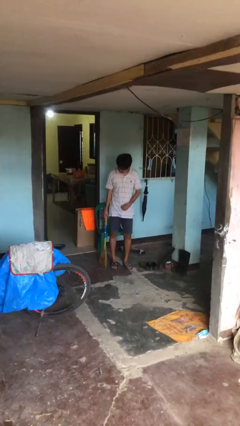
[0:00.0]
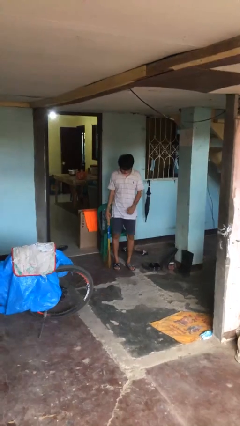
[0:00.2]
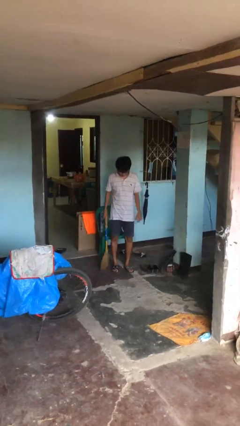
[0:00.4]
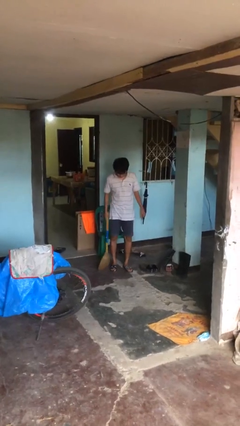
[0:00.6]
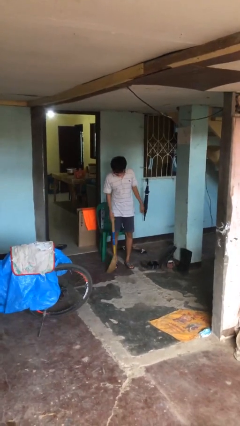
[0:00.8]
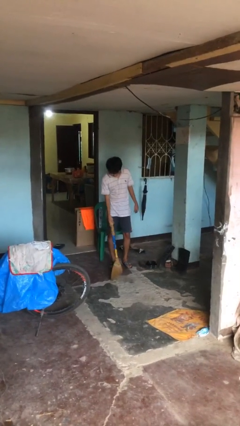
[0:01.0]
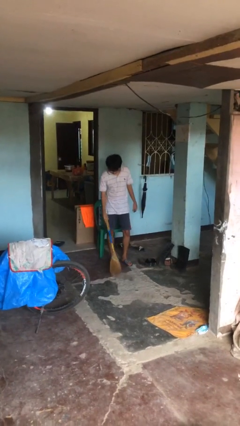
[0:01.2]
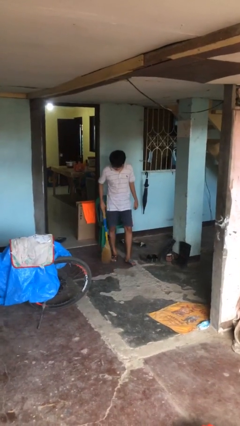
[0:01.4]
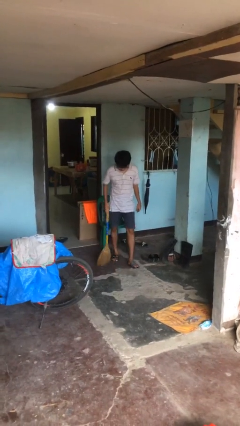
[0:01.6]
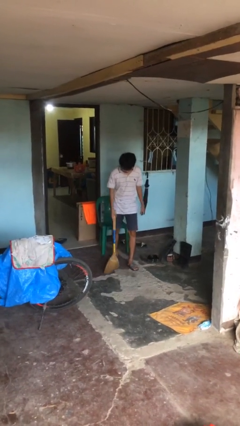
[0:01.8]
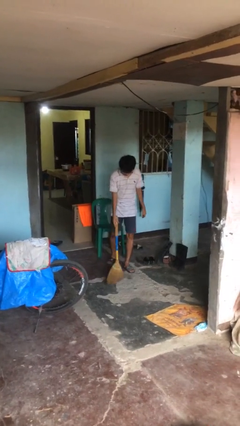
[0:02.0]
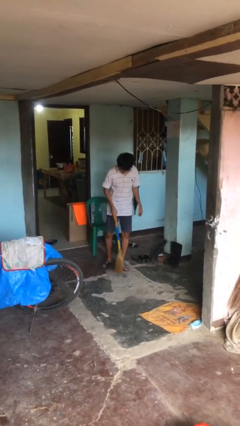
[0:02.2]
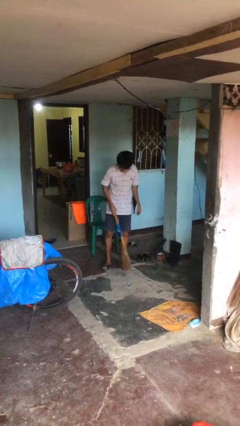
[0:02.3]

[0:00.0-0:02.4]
person sweeps floor

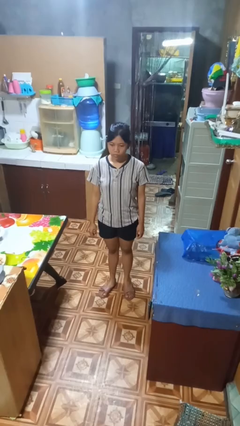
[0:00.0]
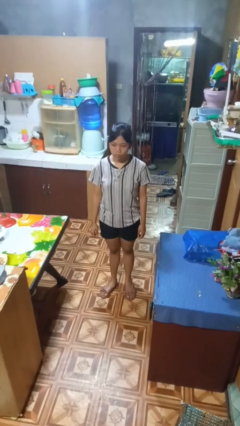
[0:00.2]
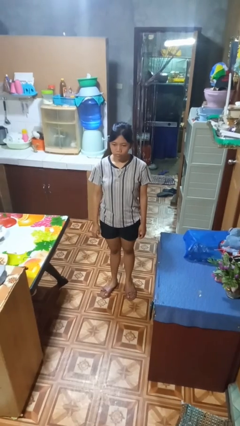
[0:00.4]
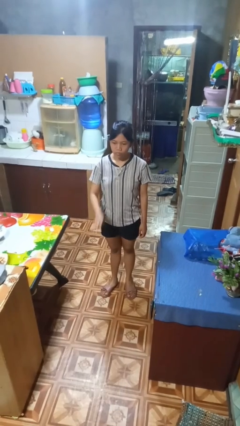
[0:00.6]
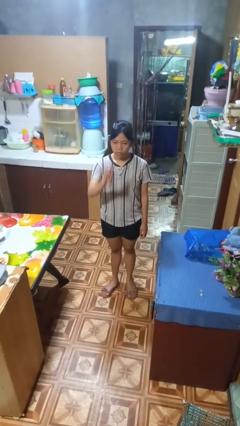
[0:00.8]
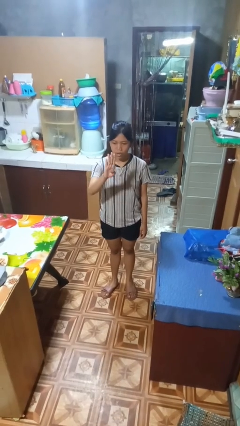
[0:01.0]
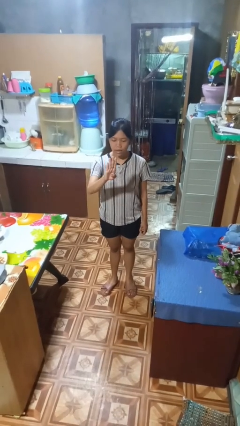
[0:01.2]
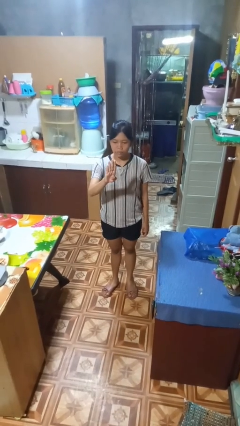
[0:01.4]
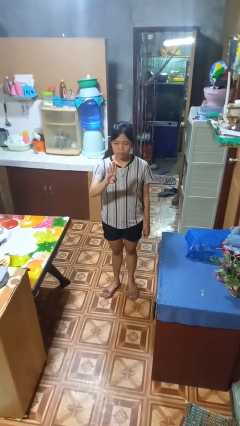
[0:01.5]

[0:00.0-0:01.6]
person gestures number four

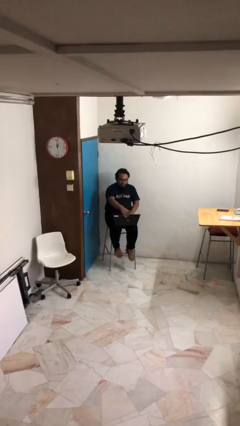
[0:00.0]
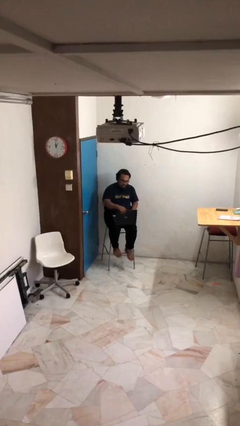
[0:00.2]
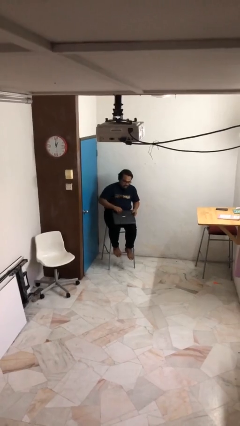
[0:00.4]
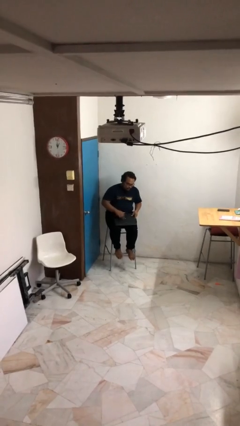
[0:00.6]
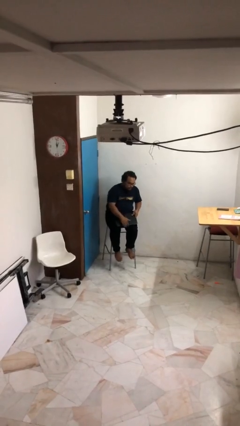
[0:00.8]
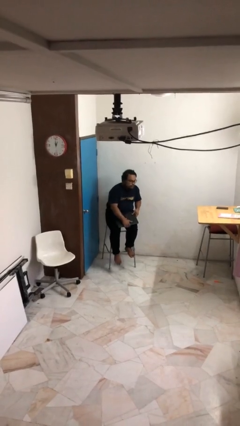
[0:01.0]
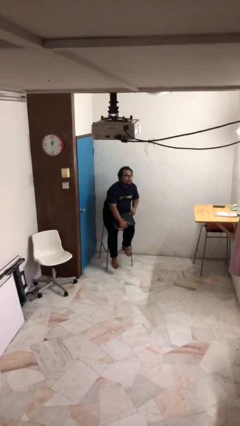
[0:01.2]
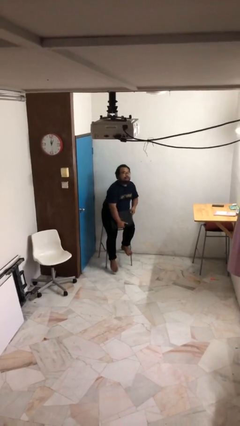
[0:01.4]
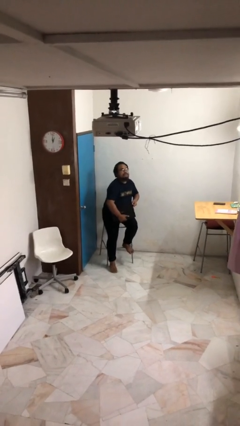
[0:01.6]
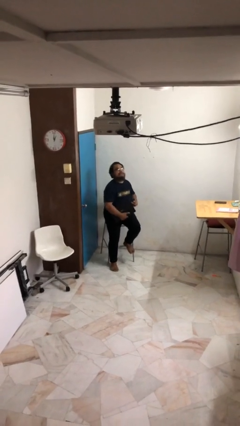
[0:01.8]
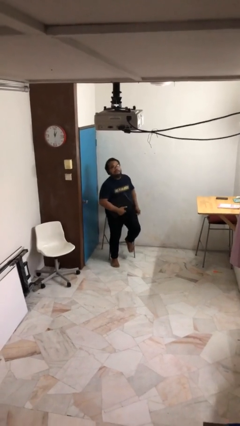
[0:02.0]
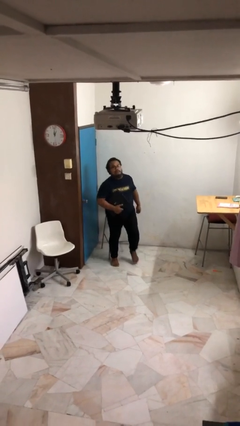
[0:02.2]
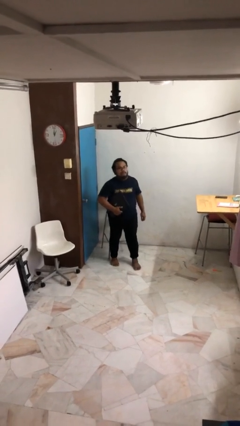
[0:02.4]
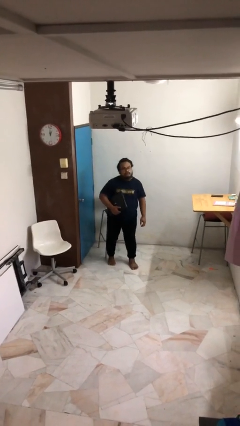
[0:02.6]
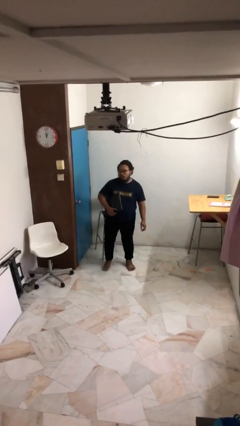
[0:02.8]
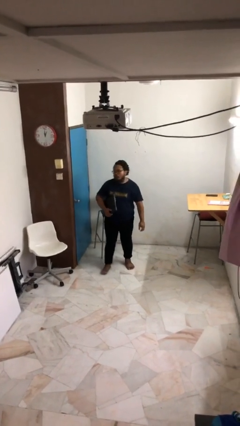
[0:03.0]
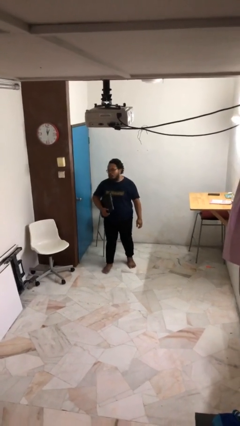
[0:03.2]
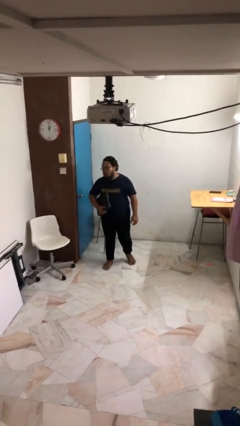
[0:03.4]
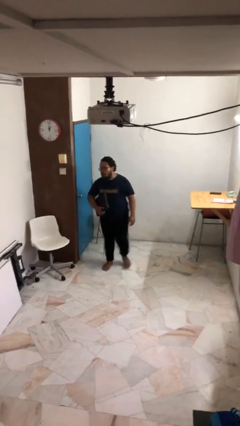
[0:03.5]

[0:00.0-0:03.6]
person stands up

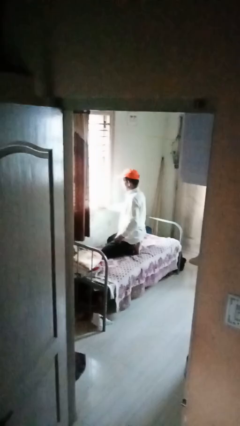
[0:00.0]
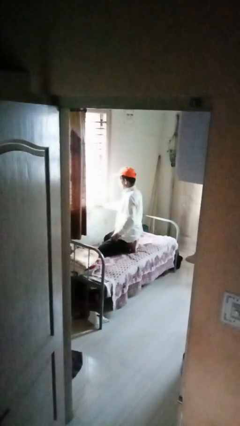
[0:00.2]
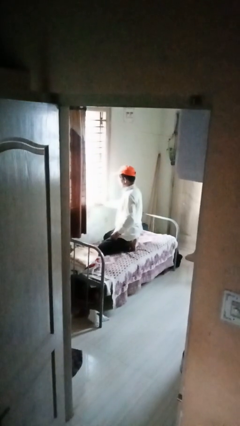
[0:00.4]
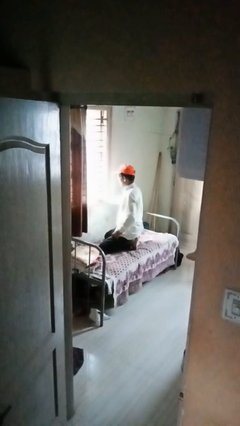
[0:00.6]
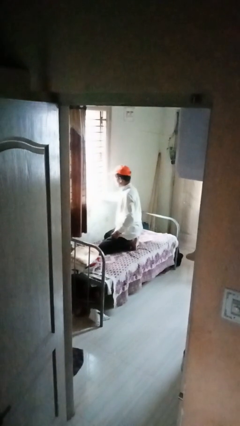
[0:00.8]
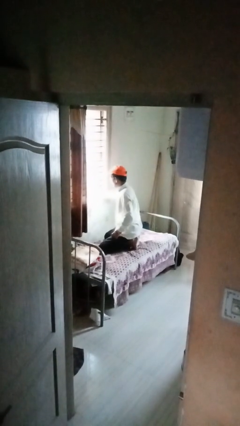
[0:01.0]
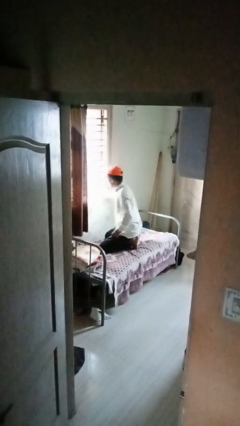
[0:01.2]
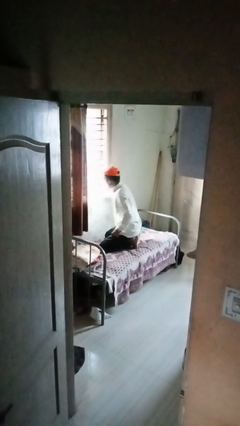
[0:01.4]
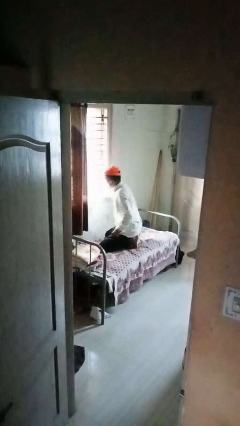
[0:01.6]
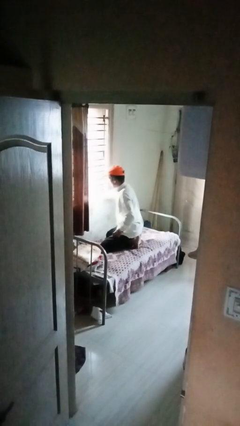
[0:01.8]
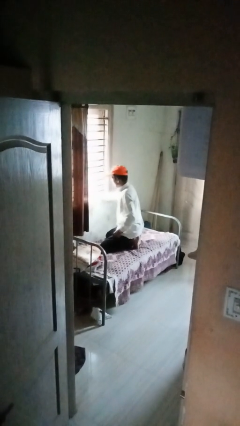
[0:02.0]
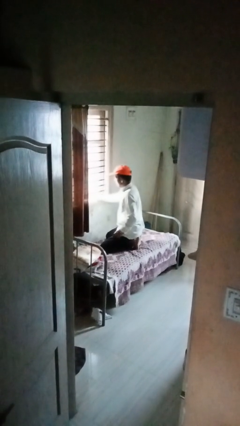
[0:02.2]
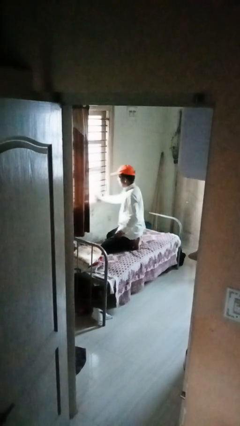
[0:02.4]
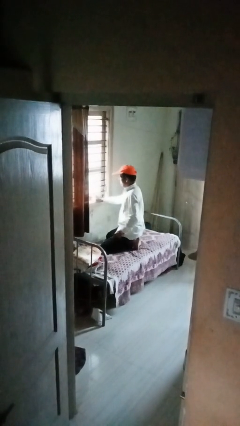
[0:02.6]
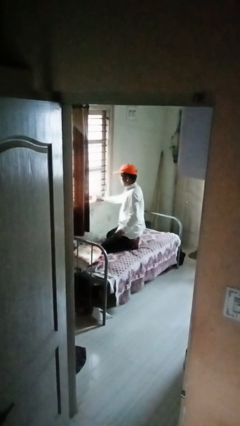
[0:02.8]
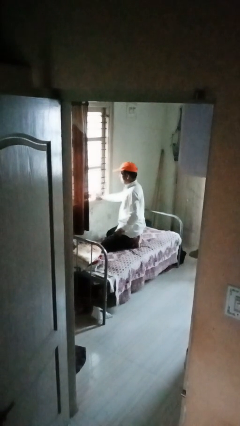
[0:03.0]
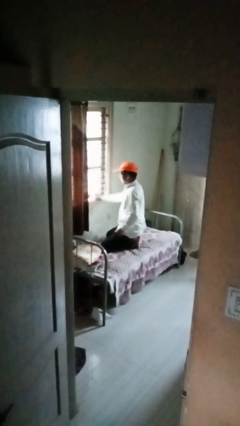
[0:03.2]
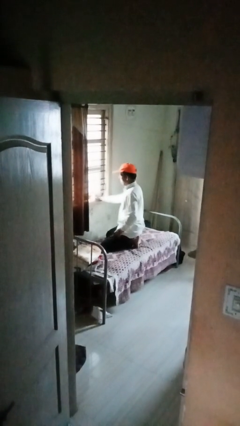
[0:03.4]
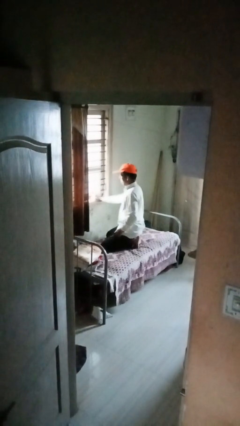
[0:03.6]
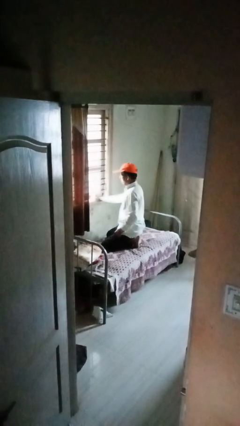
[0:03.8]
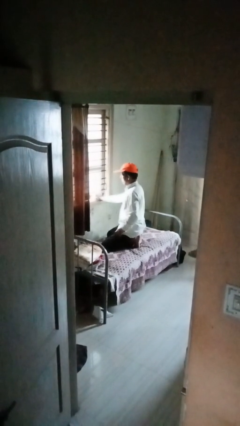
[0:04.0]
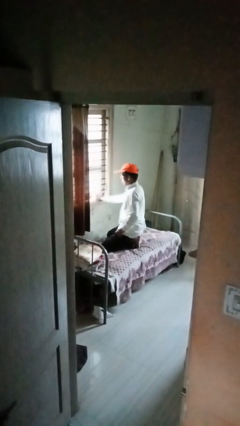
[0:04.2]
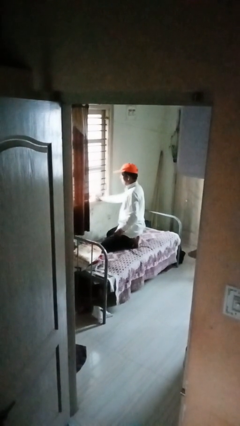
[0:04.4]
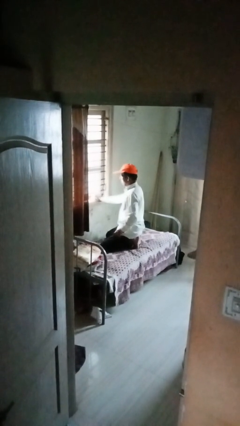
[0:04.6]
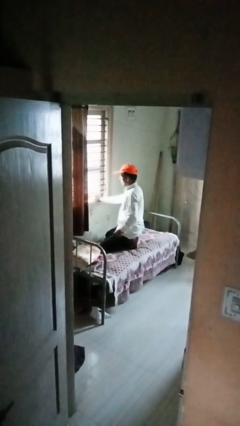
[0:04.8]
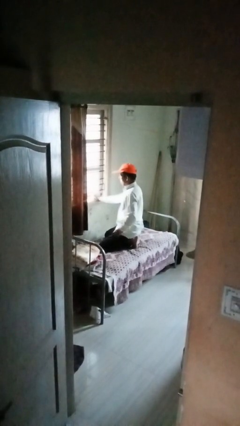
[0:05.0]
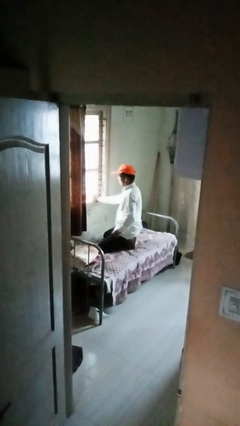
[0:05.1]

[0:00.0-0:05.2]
person closes home window

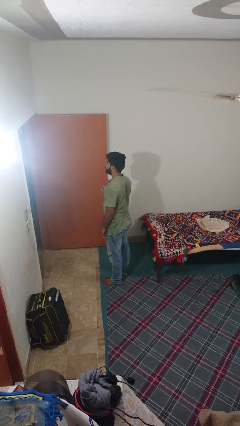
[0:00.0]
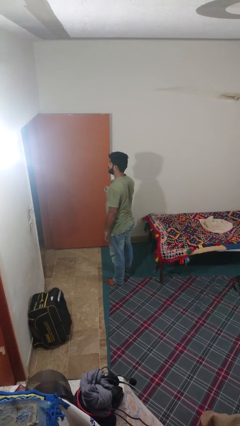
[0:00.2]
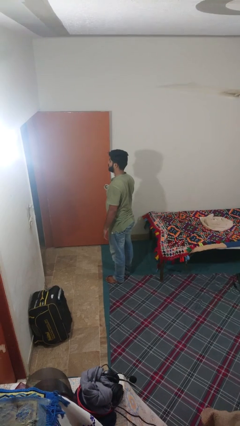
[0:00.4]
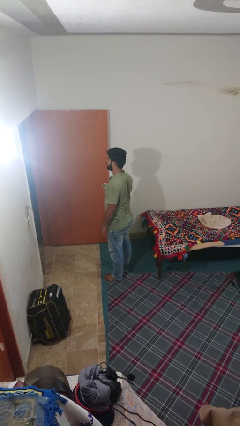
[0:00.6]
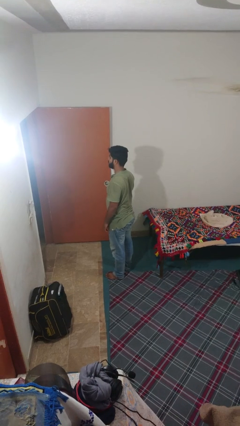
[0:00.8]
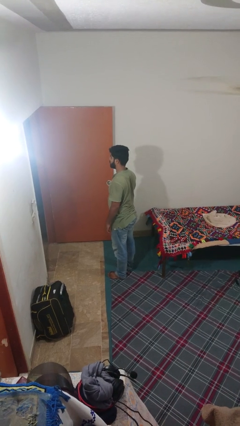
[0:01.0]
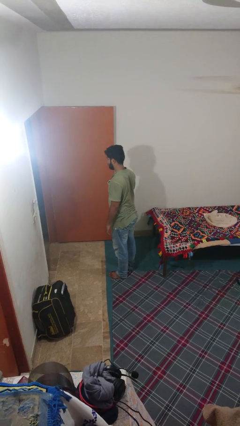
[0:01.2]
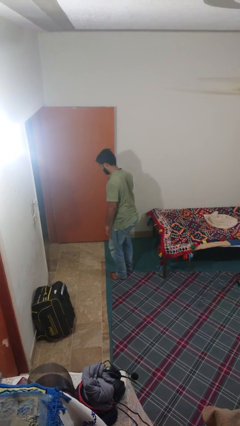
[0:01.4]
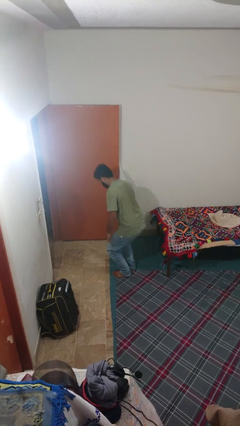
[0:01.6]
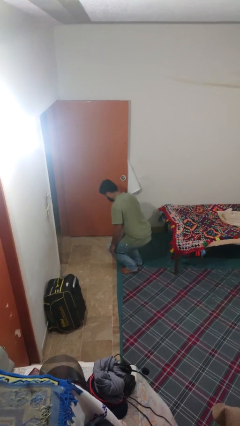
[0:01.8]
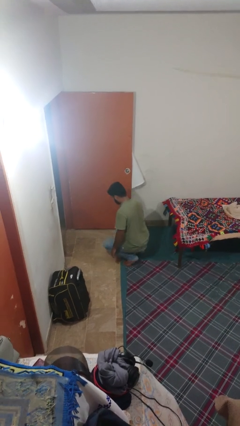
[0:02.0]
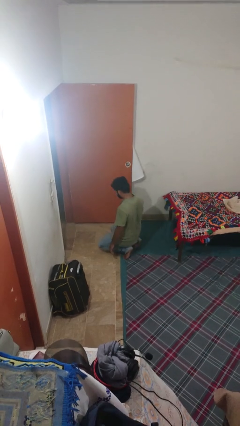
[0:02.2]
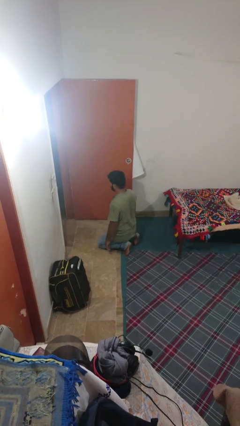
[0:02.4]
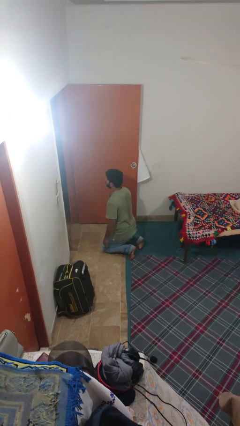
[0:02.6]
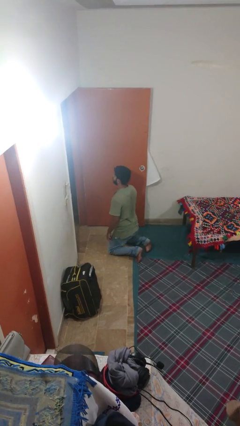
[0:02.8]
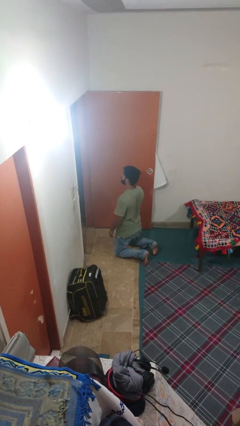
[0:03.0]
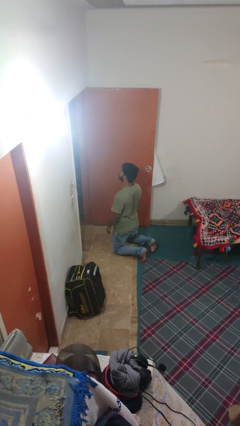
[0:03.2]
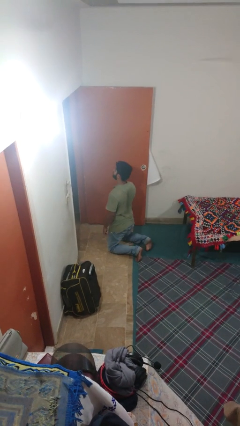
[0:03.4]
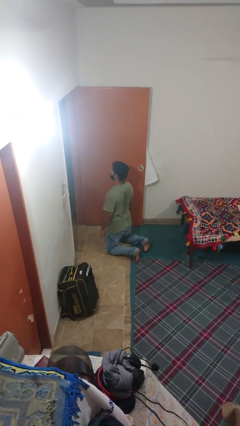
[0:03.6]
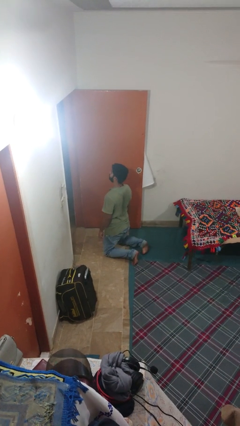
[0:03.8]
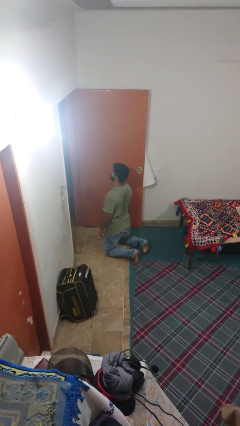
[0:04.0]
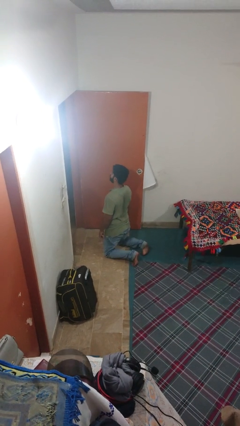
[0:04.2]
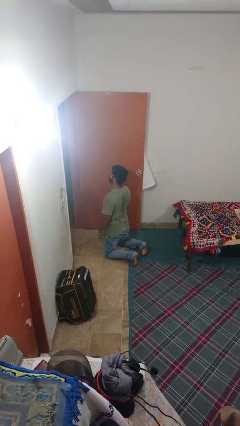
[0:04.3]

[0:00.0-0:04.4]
person kneels

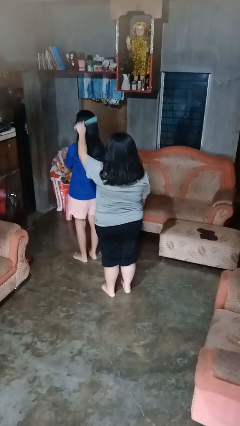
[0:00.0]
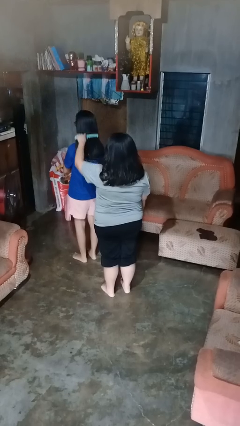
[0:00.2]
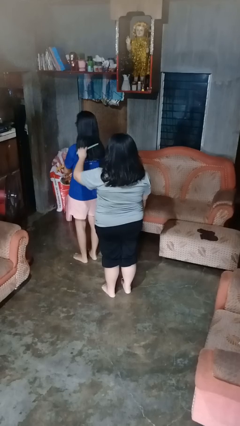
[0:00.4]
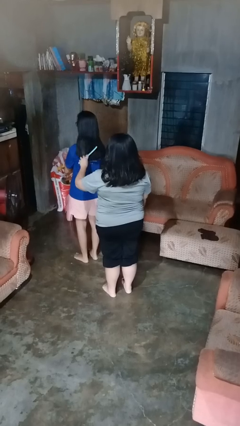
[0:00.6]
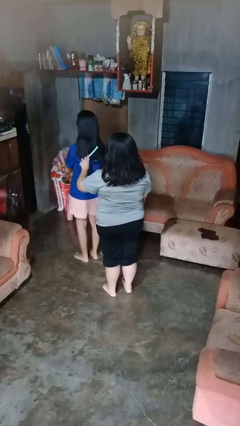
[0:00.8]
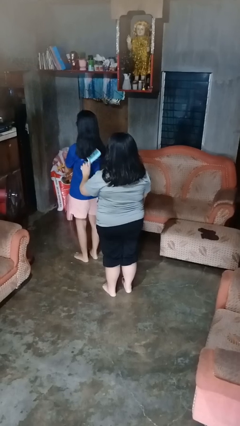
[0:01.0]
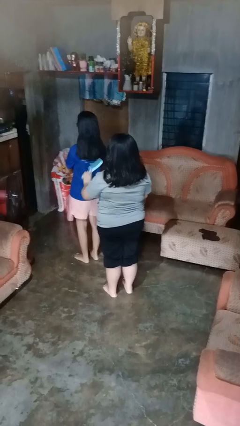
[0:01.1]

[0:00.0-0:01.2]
person brushes hair of person
